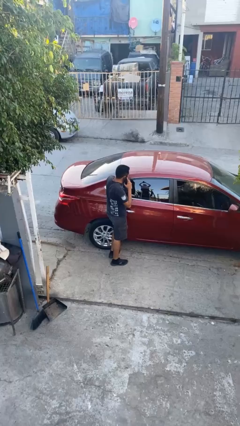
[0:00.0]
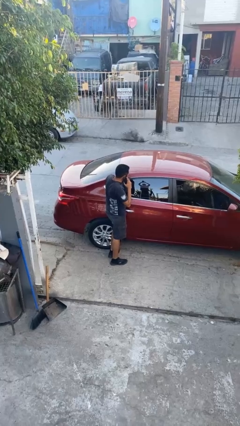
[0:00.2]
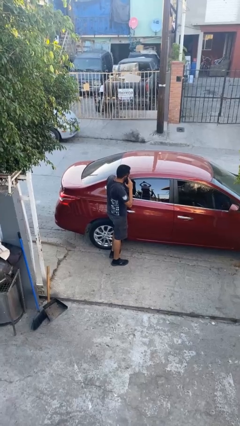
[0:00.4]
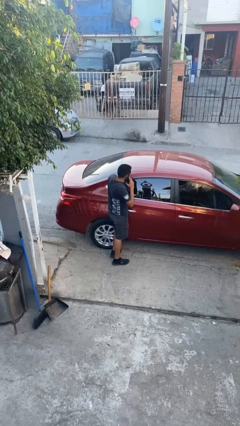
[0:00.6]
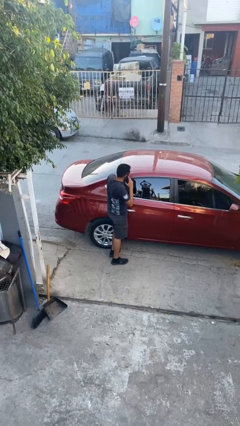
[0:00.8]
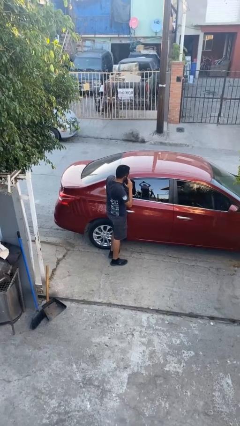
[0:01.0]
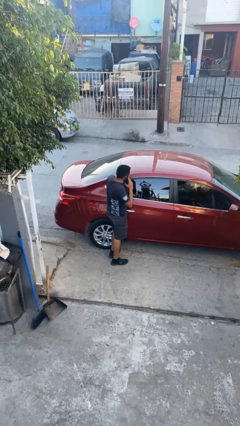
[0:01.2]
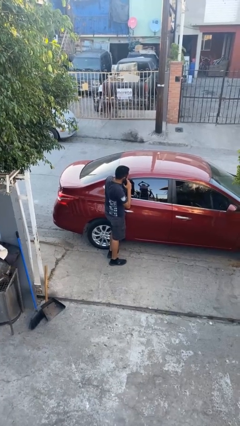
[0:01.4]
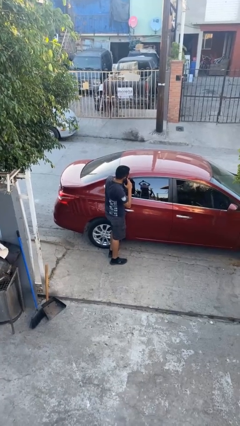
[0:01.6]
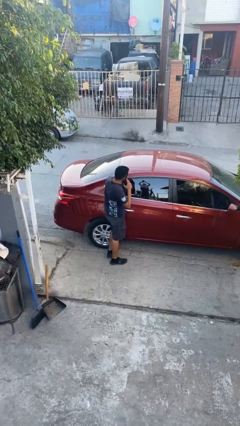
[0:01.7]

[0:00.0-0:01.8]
person leans against car

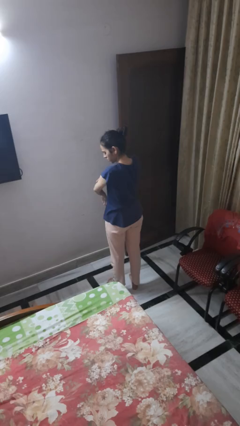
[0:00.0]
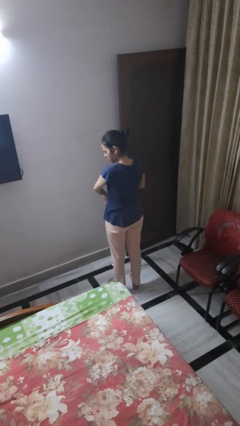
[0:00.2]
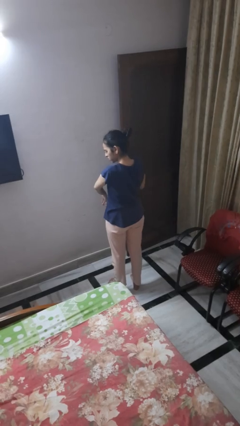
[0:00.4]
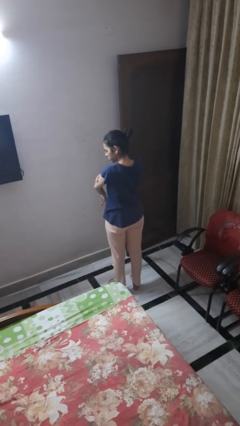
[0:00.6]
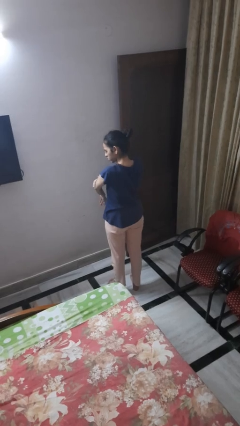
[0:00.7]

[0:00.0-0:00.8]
person swats bug

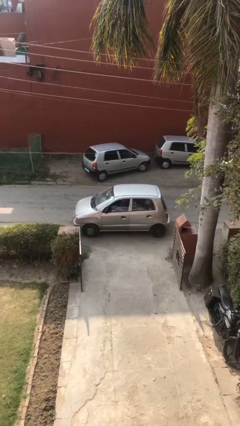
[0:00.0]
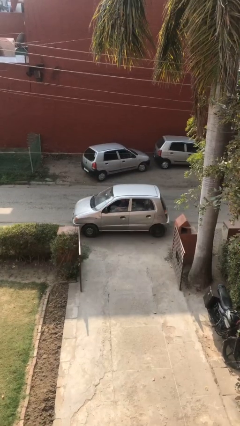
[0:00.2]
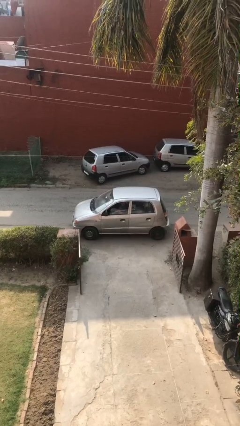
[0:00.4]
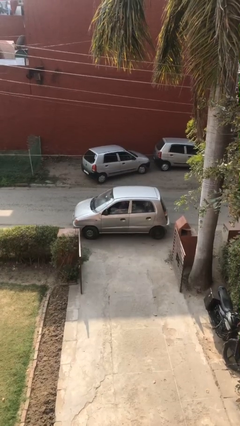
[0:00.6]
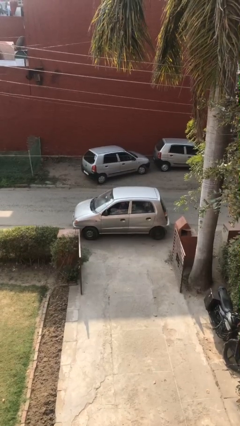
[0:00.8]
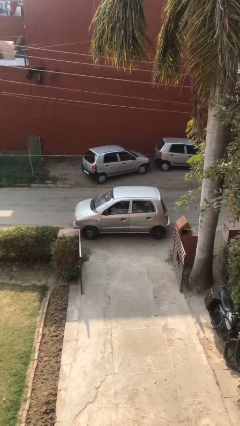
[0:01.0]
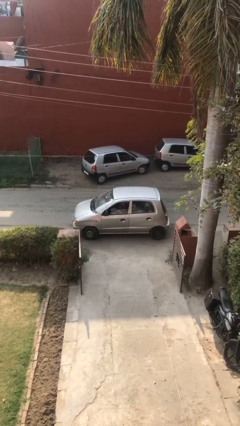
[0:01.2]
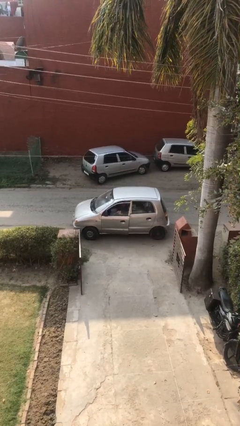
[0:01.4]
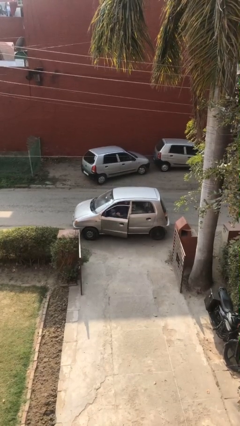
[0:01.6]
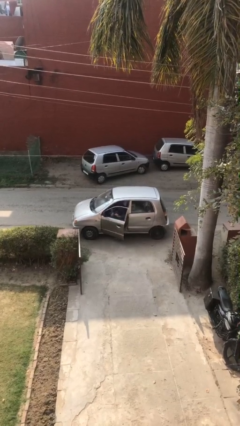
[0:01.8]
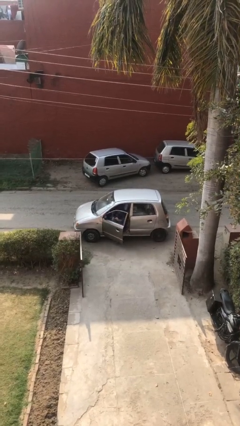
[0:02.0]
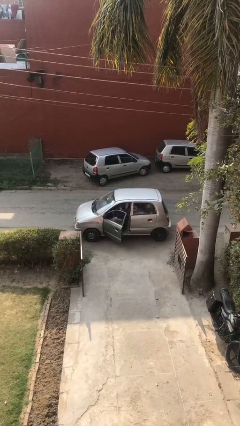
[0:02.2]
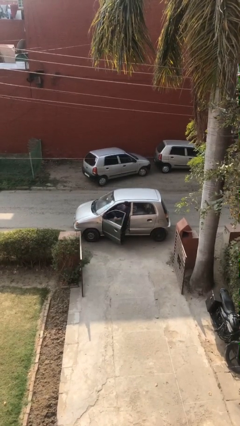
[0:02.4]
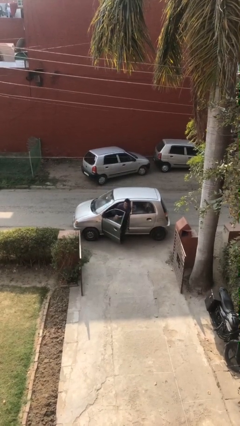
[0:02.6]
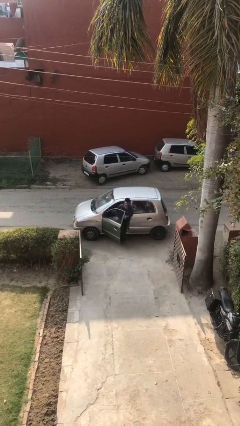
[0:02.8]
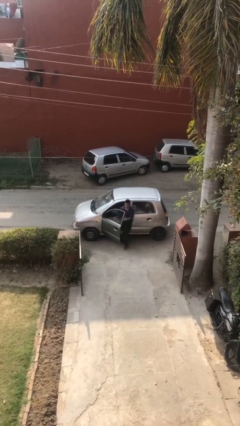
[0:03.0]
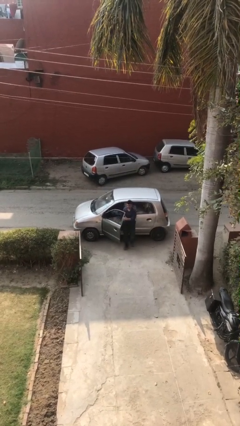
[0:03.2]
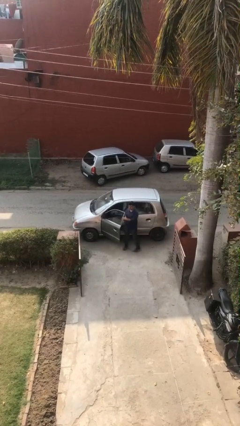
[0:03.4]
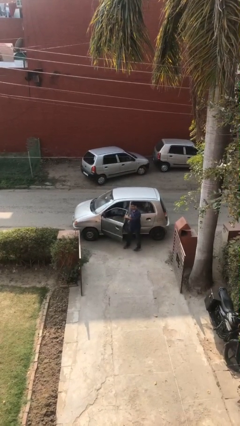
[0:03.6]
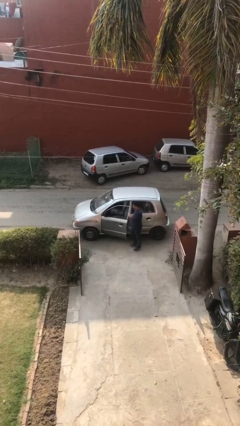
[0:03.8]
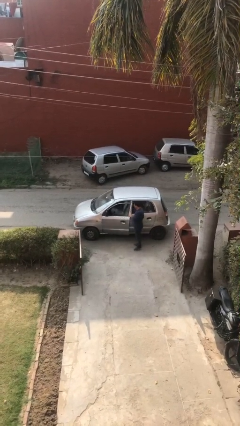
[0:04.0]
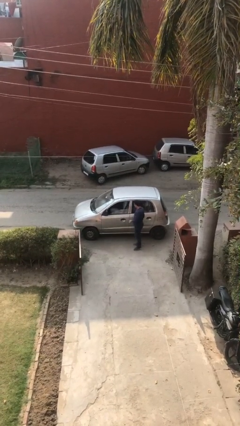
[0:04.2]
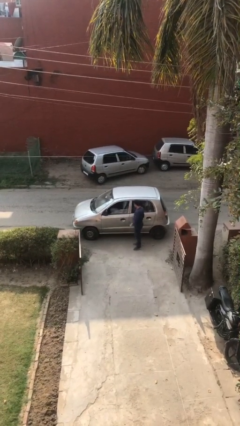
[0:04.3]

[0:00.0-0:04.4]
car drops off person

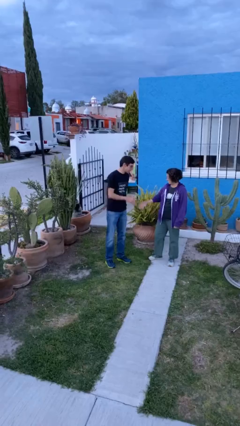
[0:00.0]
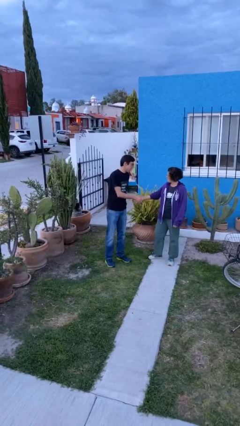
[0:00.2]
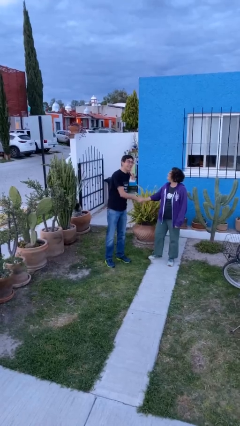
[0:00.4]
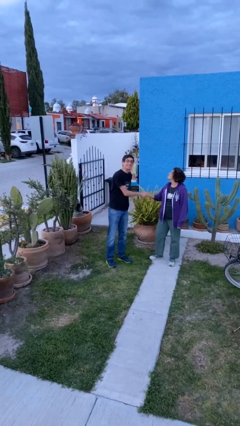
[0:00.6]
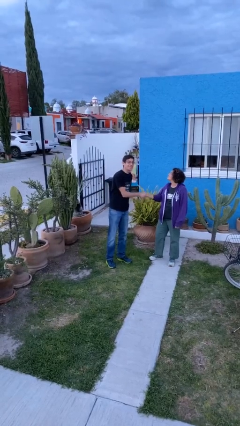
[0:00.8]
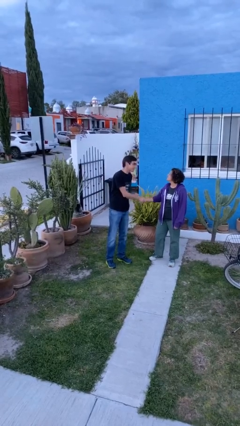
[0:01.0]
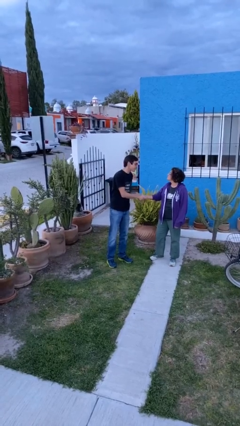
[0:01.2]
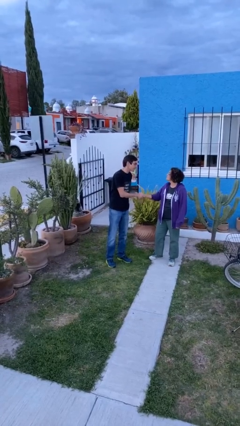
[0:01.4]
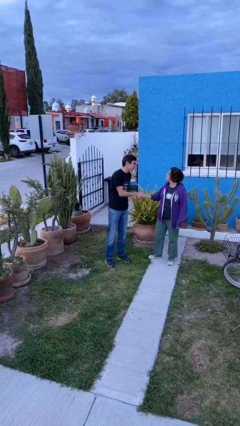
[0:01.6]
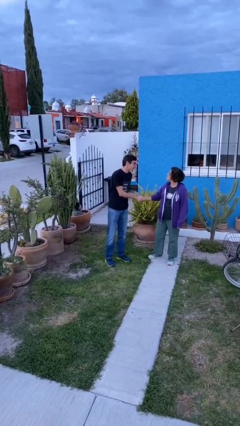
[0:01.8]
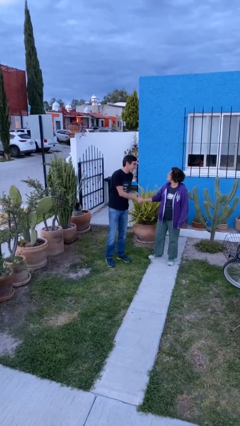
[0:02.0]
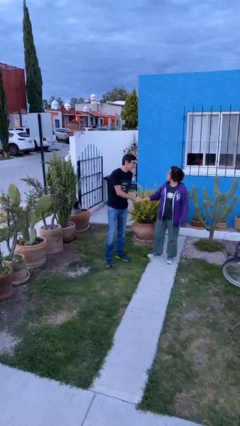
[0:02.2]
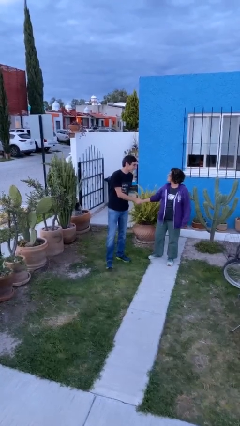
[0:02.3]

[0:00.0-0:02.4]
person shakes hand

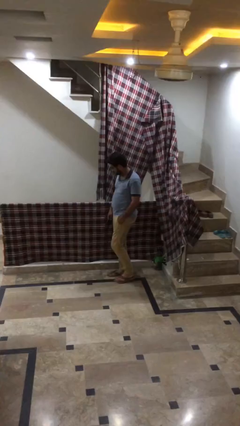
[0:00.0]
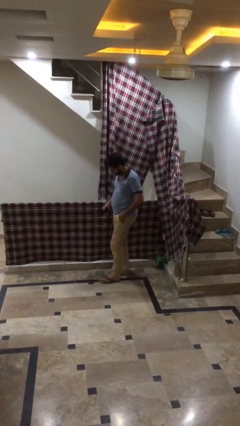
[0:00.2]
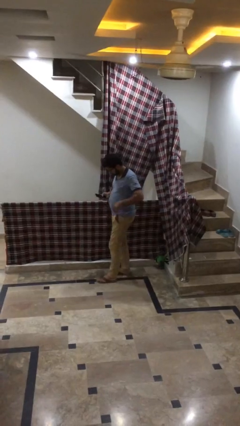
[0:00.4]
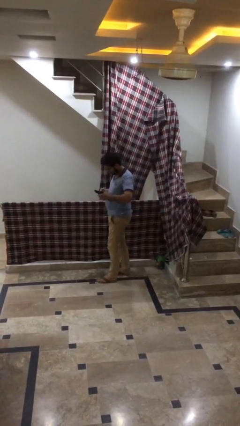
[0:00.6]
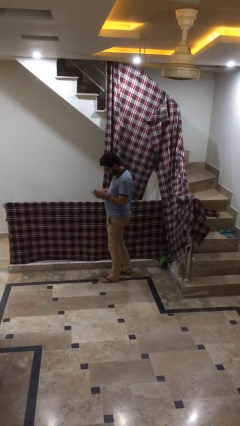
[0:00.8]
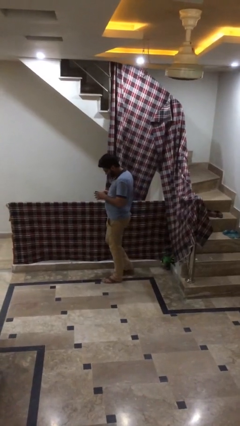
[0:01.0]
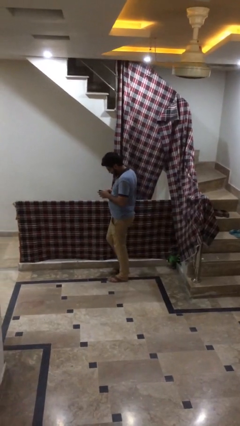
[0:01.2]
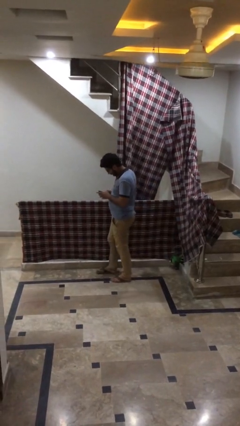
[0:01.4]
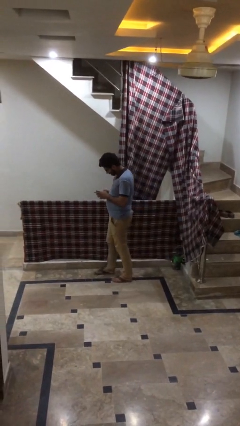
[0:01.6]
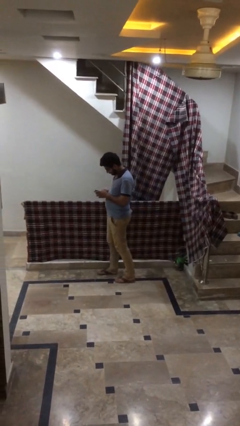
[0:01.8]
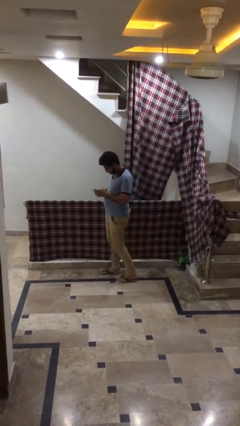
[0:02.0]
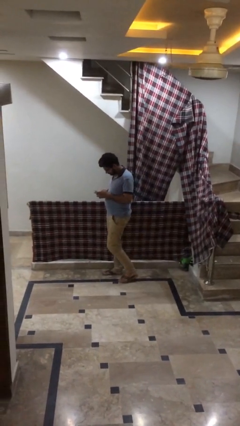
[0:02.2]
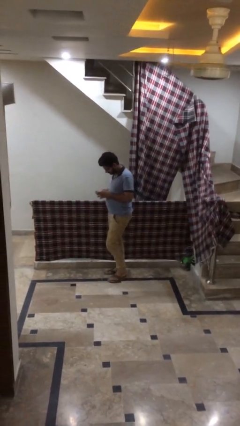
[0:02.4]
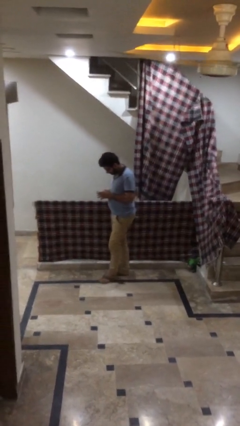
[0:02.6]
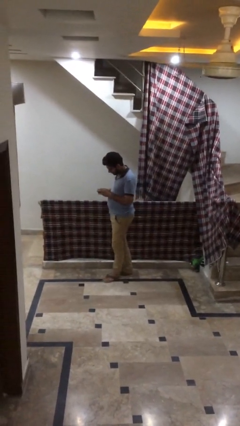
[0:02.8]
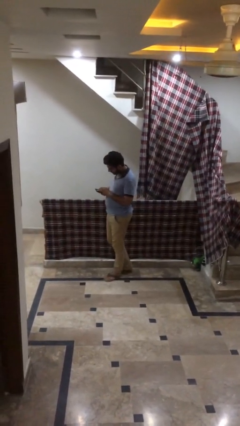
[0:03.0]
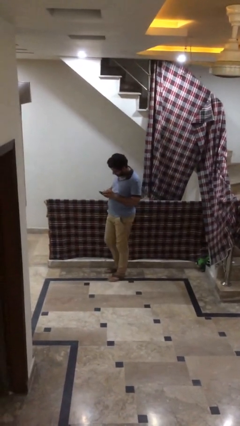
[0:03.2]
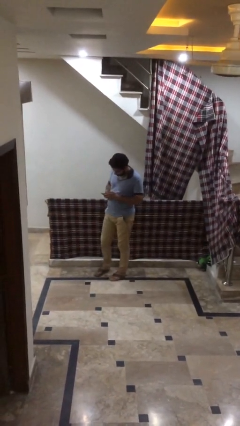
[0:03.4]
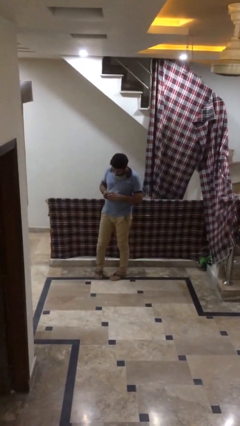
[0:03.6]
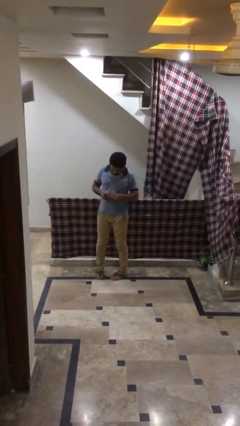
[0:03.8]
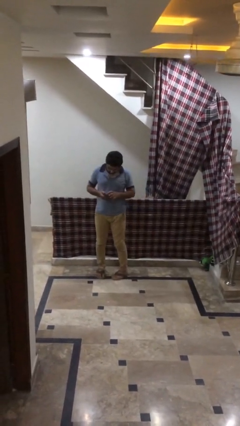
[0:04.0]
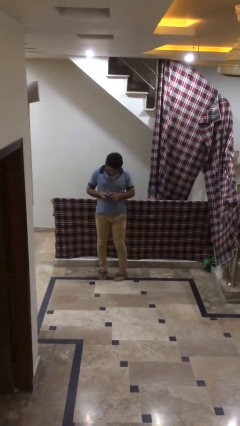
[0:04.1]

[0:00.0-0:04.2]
person texts on phone

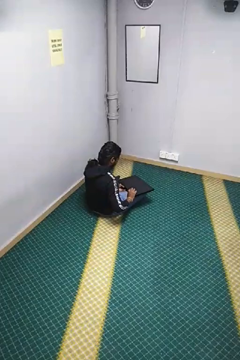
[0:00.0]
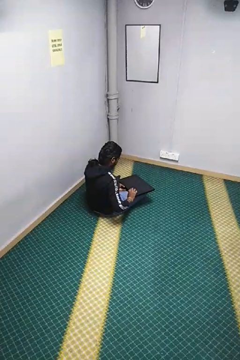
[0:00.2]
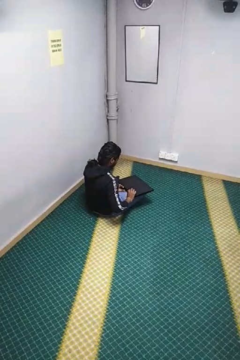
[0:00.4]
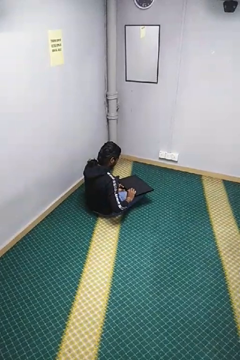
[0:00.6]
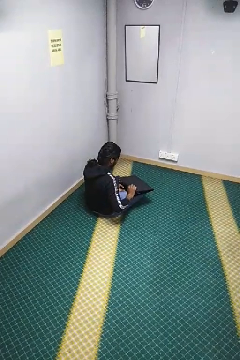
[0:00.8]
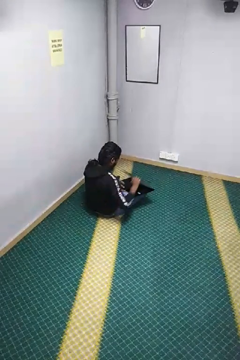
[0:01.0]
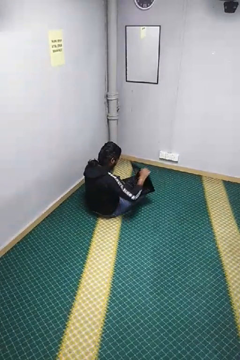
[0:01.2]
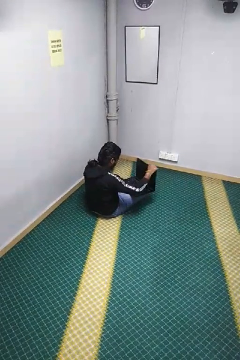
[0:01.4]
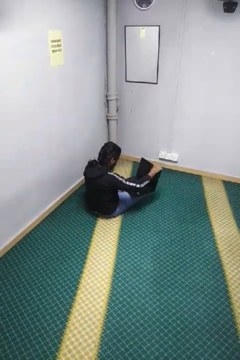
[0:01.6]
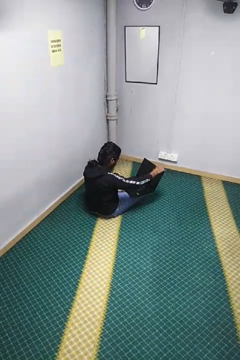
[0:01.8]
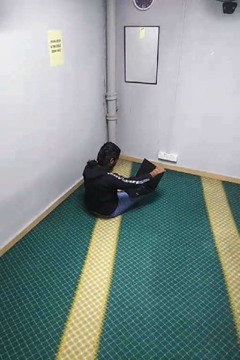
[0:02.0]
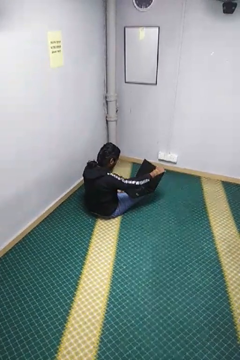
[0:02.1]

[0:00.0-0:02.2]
person opens laptop

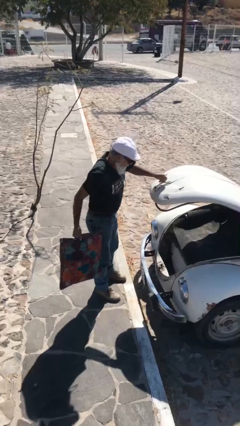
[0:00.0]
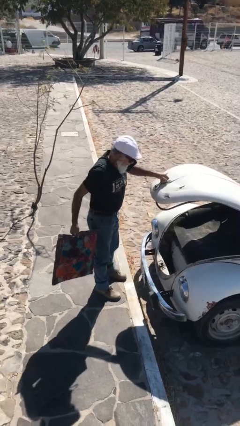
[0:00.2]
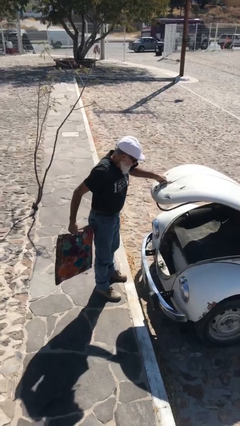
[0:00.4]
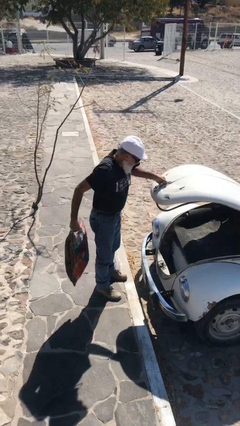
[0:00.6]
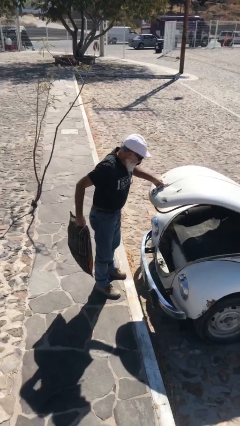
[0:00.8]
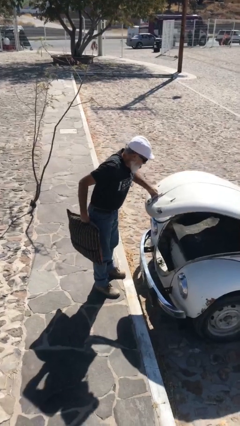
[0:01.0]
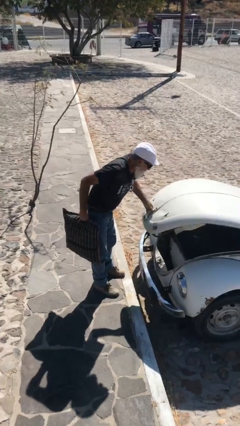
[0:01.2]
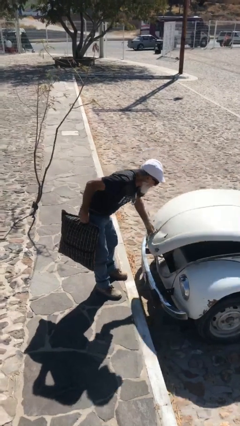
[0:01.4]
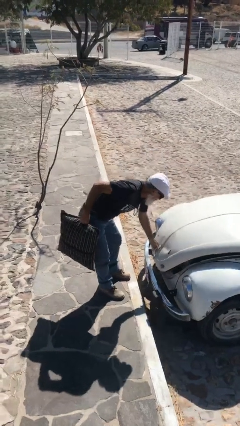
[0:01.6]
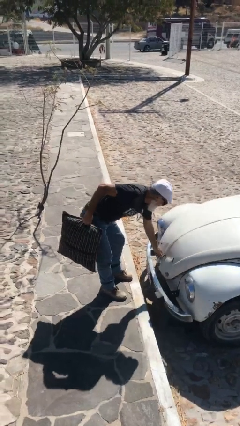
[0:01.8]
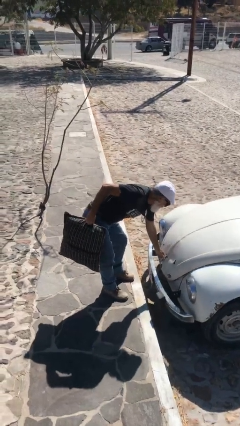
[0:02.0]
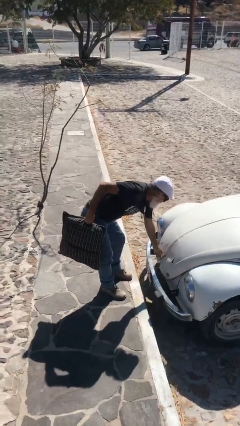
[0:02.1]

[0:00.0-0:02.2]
person closes car trunk
